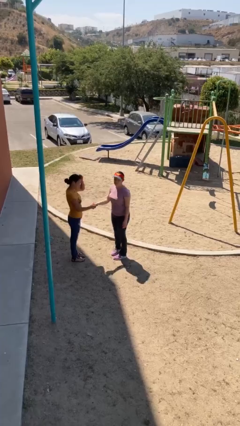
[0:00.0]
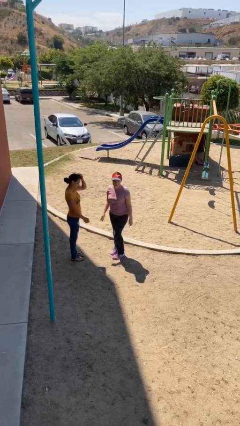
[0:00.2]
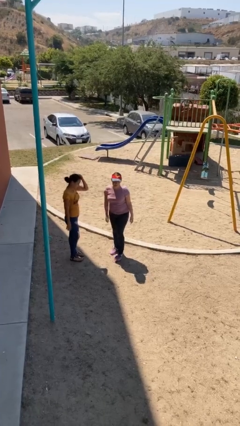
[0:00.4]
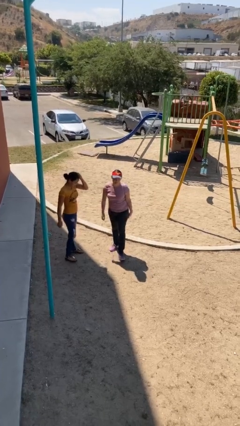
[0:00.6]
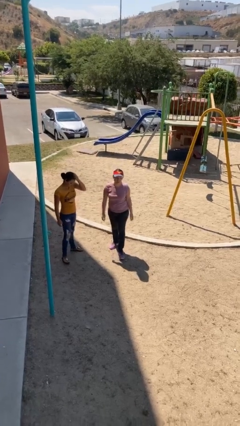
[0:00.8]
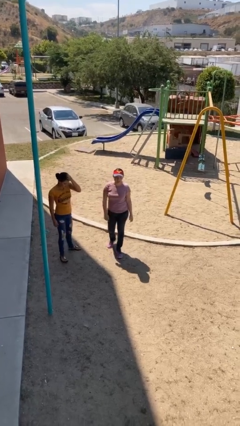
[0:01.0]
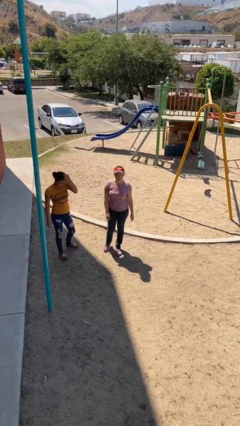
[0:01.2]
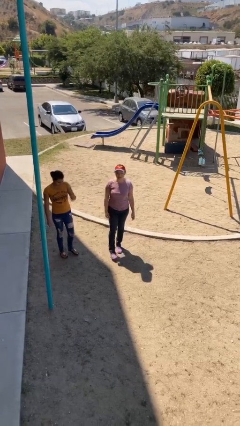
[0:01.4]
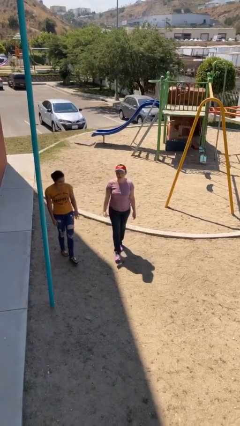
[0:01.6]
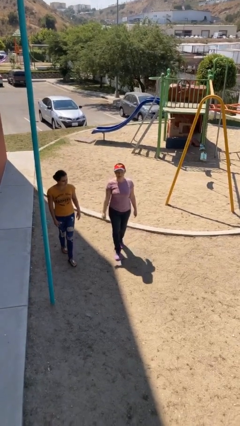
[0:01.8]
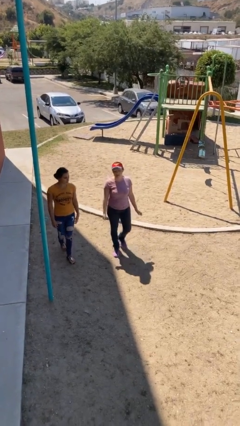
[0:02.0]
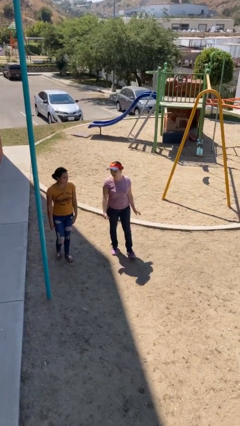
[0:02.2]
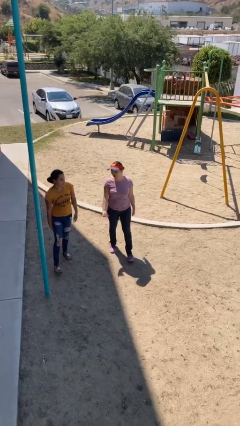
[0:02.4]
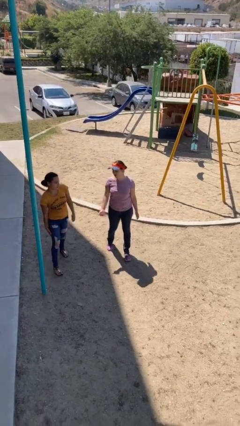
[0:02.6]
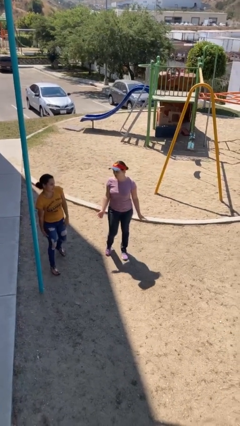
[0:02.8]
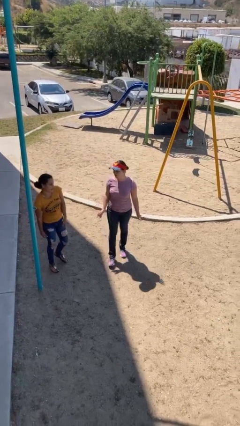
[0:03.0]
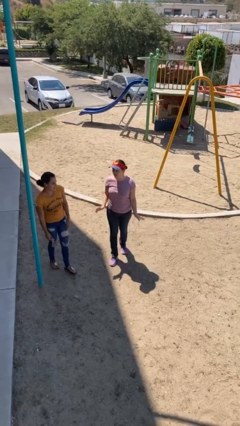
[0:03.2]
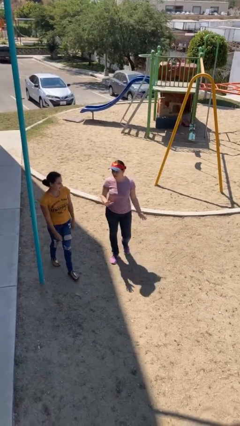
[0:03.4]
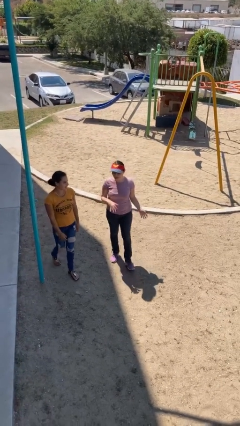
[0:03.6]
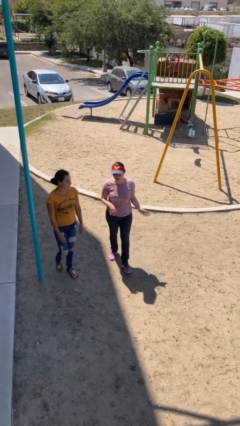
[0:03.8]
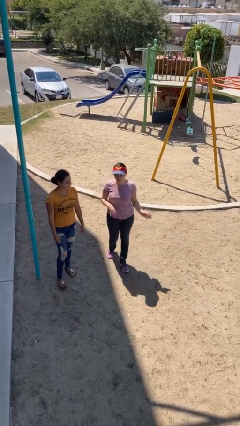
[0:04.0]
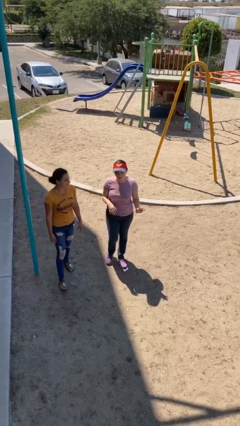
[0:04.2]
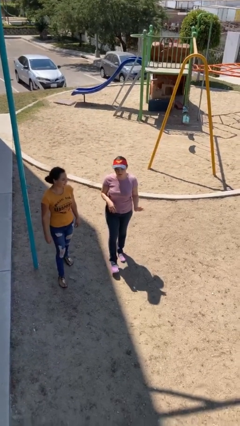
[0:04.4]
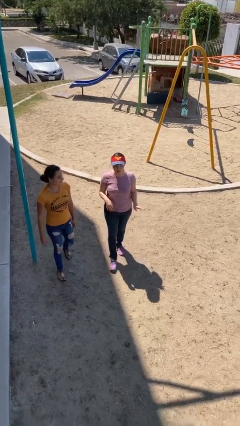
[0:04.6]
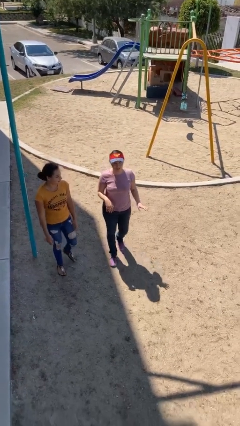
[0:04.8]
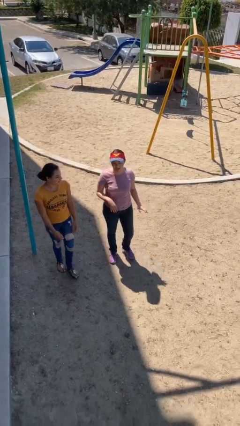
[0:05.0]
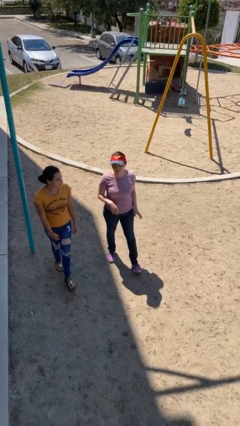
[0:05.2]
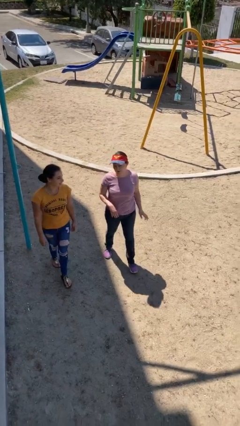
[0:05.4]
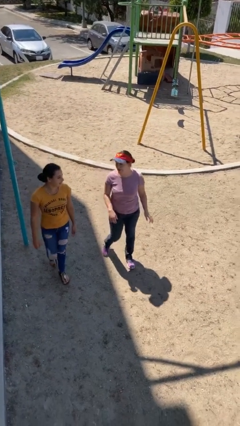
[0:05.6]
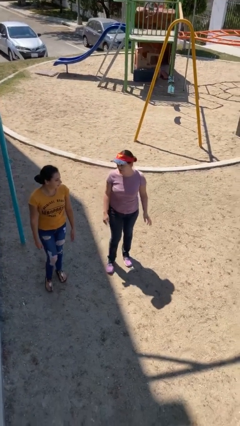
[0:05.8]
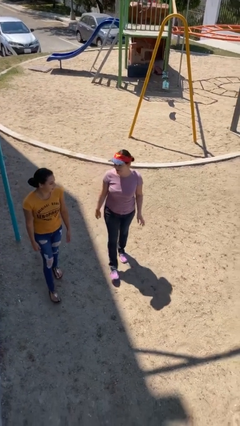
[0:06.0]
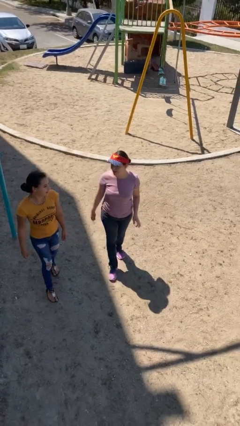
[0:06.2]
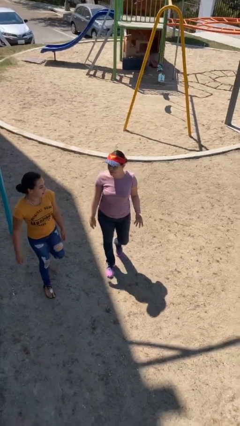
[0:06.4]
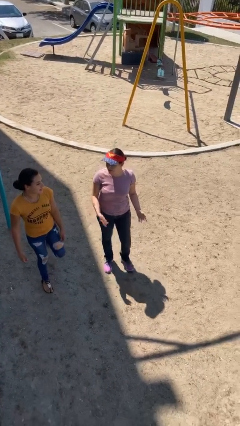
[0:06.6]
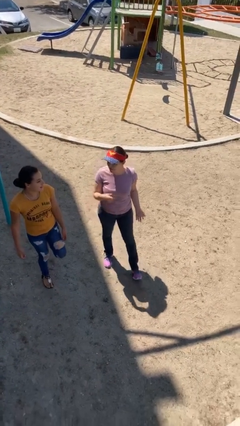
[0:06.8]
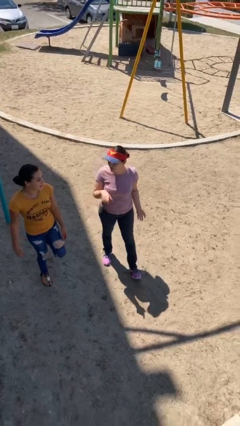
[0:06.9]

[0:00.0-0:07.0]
person talks to person

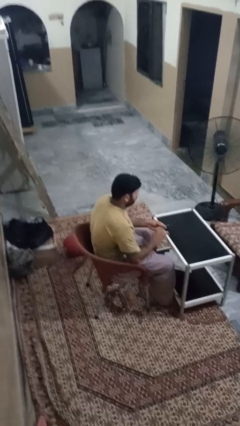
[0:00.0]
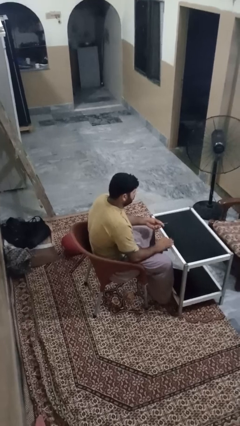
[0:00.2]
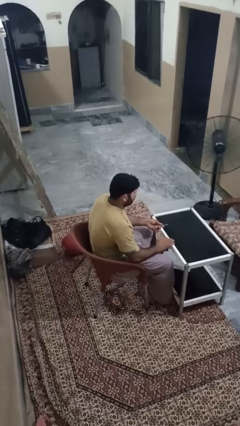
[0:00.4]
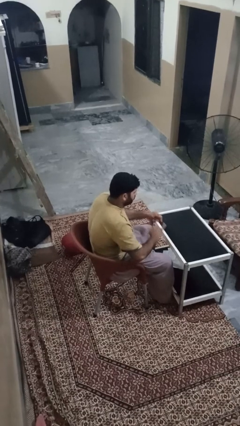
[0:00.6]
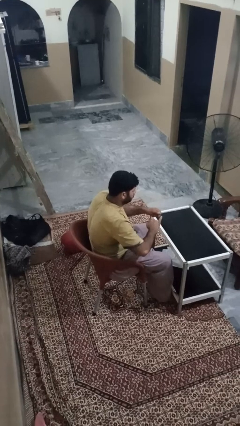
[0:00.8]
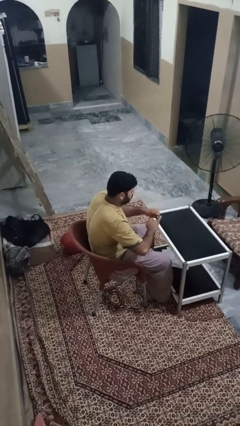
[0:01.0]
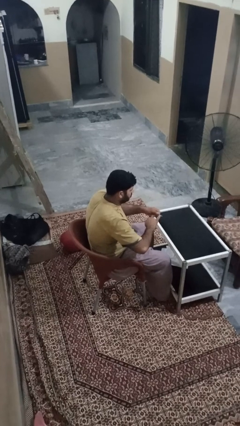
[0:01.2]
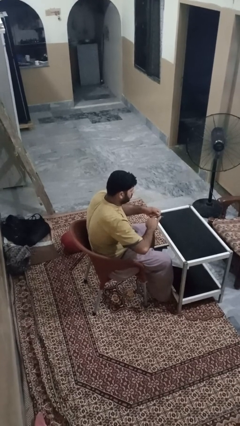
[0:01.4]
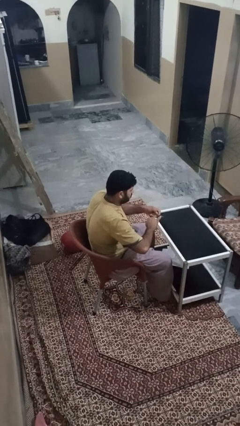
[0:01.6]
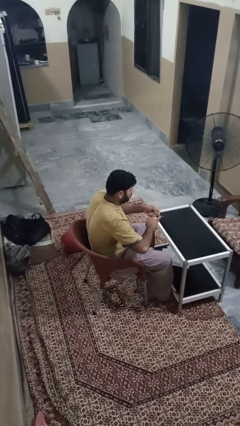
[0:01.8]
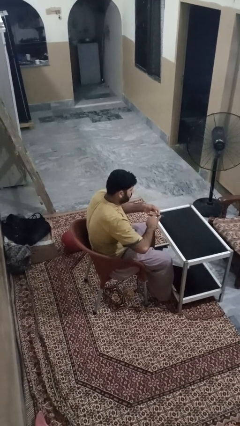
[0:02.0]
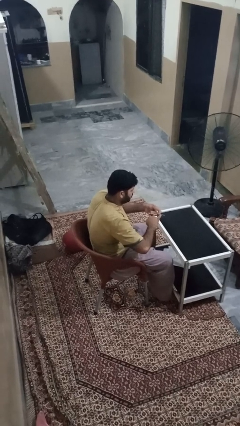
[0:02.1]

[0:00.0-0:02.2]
person files fingernails

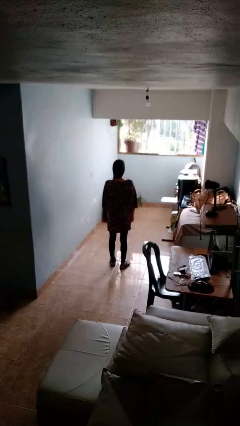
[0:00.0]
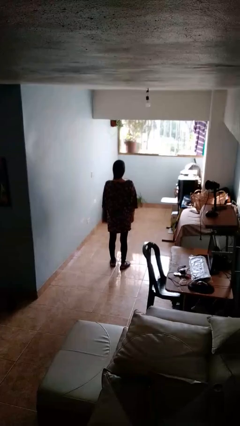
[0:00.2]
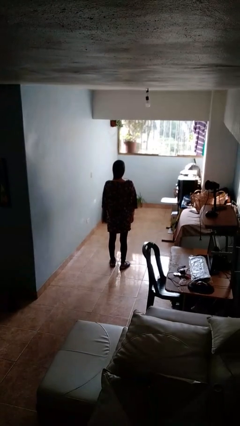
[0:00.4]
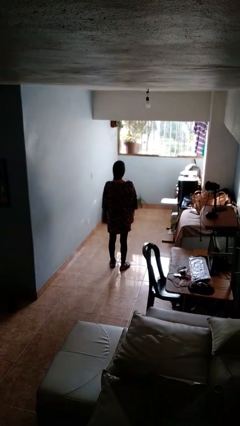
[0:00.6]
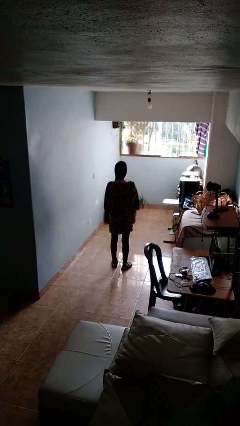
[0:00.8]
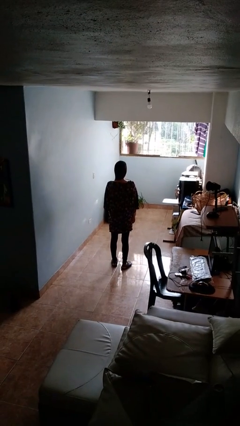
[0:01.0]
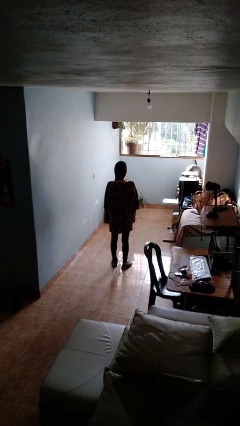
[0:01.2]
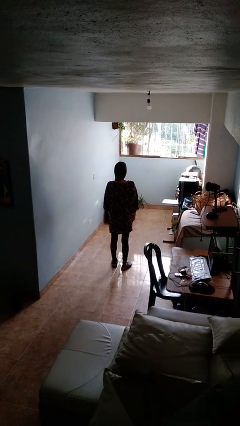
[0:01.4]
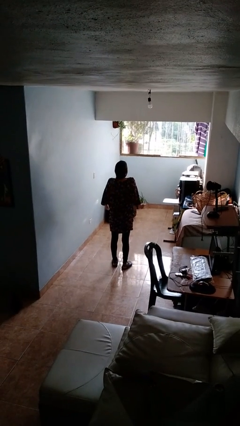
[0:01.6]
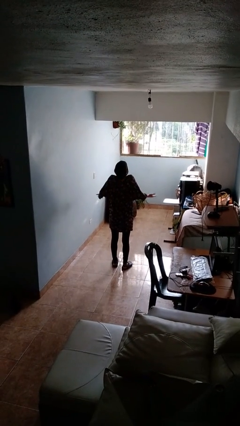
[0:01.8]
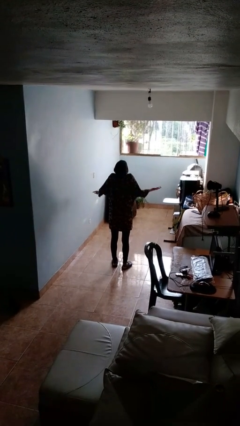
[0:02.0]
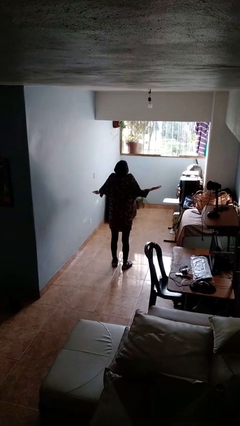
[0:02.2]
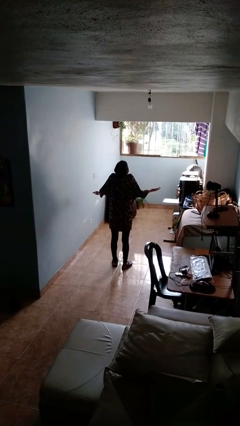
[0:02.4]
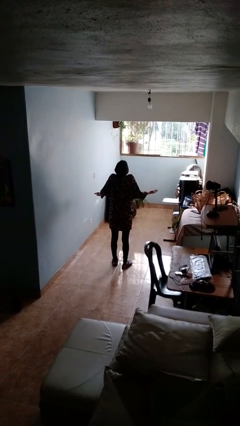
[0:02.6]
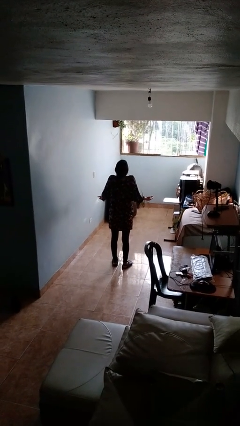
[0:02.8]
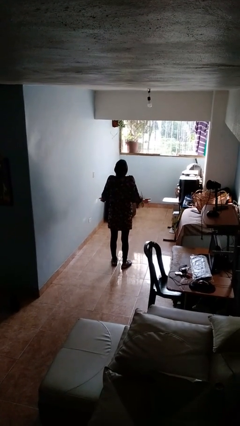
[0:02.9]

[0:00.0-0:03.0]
person shrugs

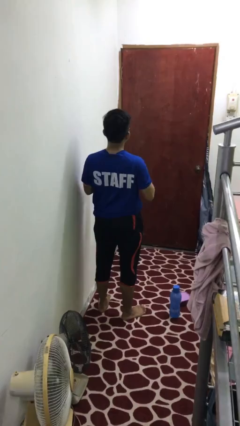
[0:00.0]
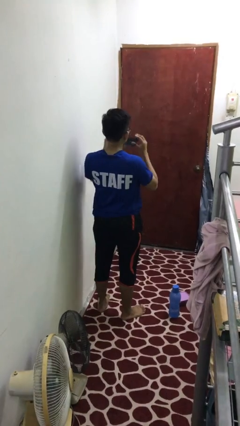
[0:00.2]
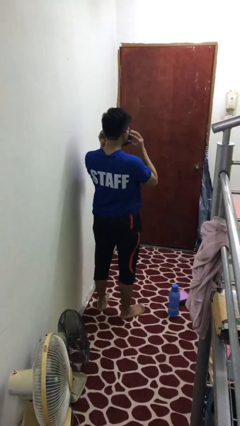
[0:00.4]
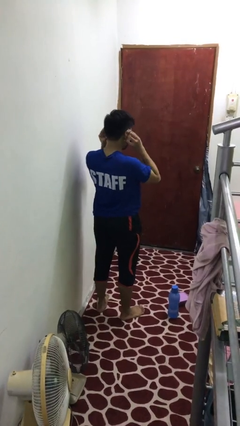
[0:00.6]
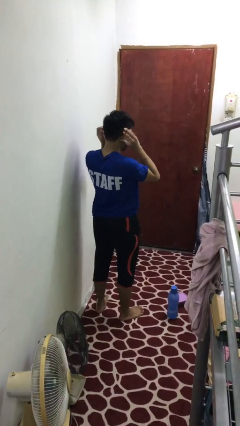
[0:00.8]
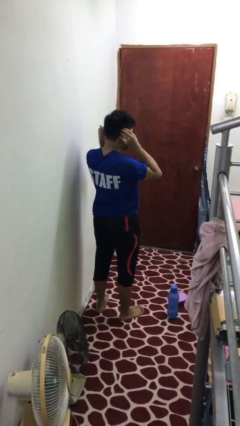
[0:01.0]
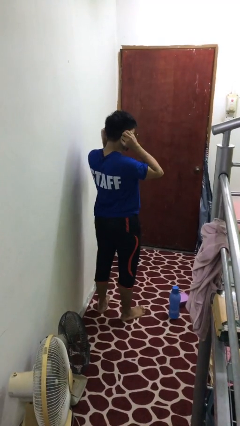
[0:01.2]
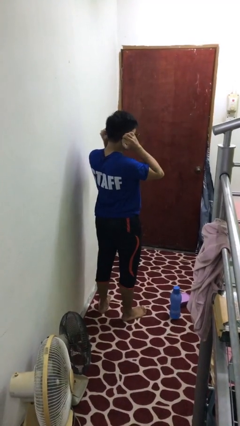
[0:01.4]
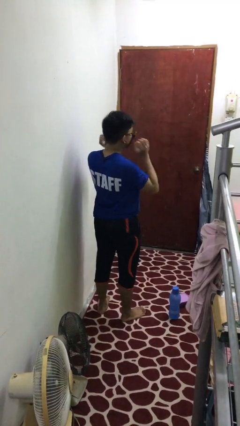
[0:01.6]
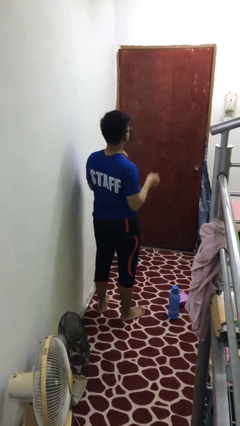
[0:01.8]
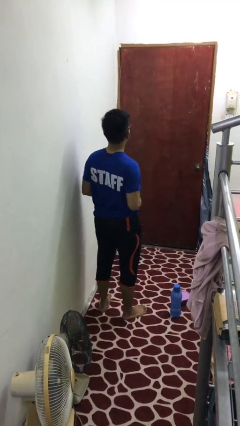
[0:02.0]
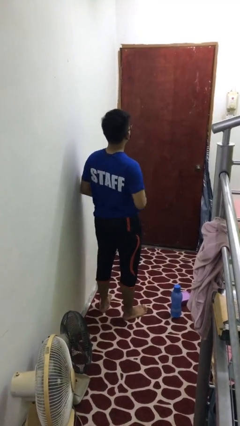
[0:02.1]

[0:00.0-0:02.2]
person puts on facemask

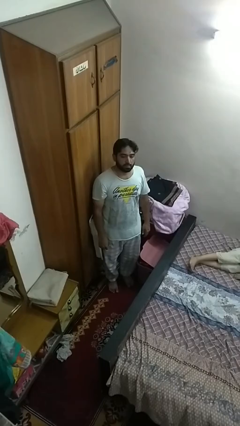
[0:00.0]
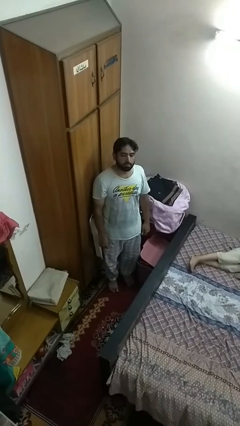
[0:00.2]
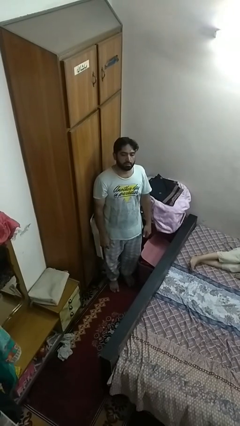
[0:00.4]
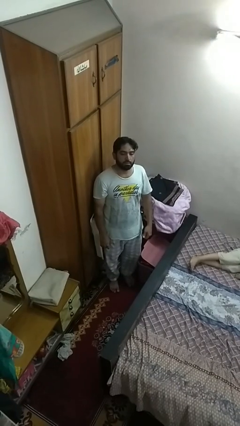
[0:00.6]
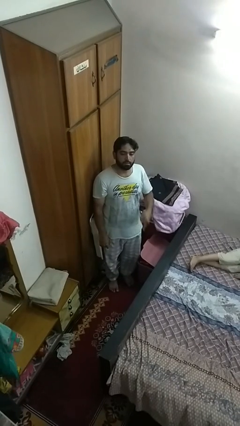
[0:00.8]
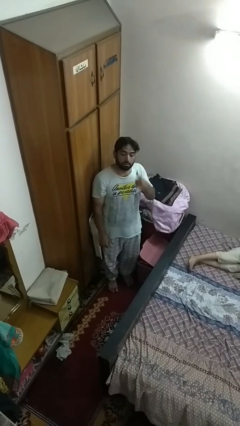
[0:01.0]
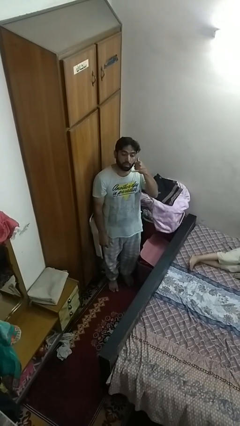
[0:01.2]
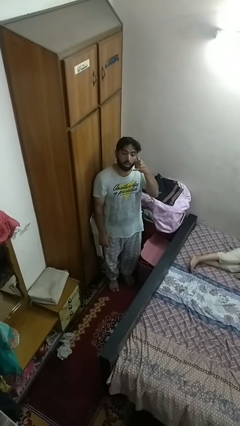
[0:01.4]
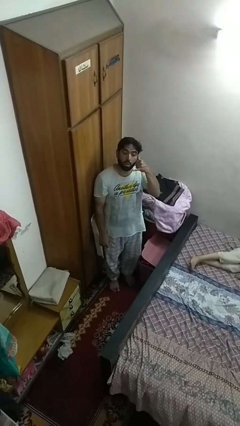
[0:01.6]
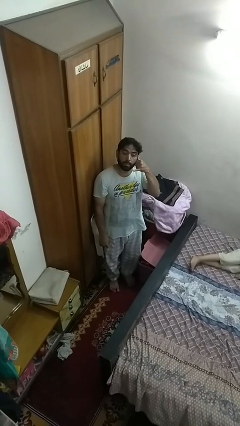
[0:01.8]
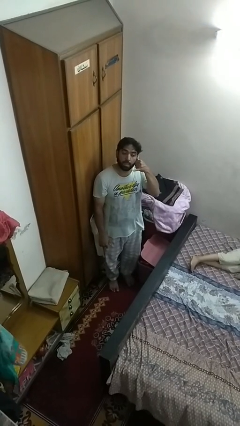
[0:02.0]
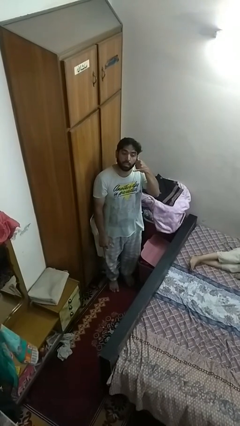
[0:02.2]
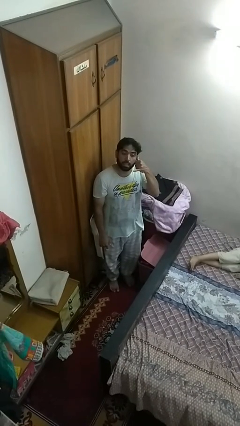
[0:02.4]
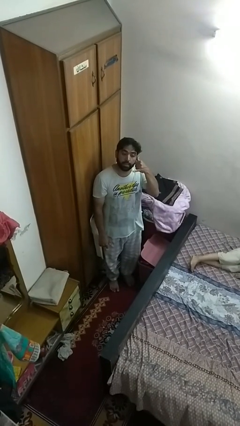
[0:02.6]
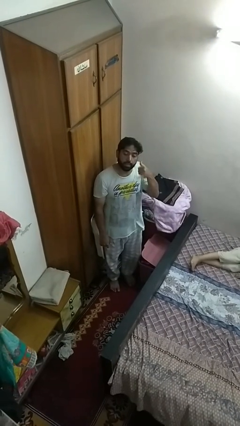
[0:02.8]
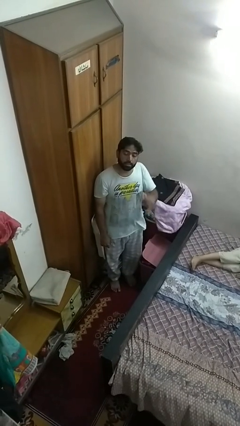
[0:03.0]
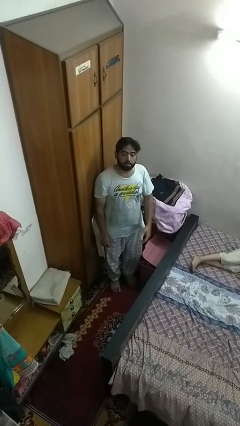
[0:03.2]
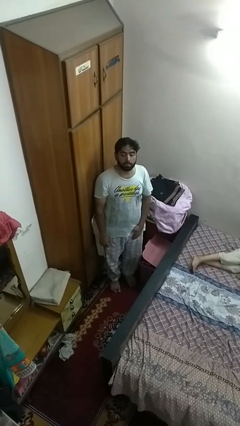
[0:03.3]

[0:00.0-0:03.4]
person gestures call me
